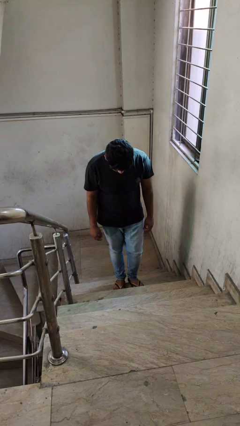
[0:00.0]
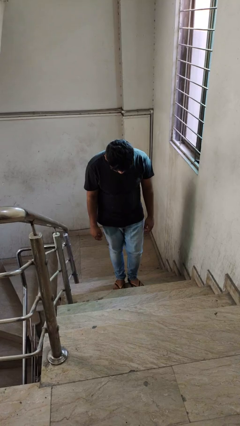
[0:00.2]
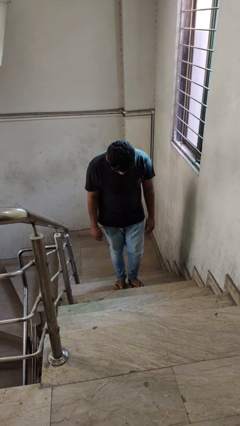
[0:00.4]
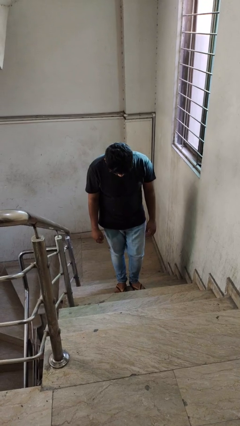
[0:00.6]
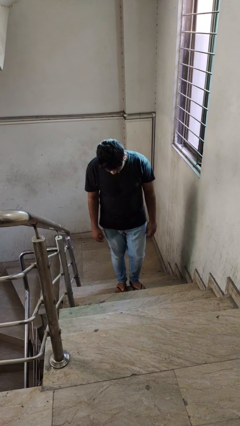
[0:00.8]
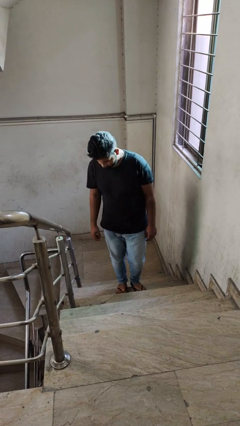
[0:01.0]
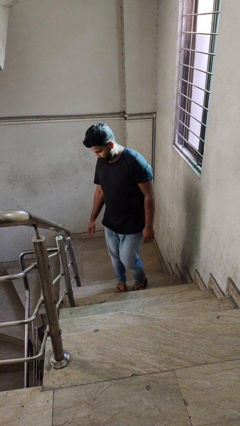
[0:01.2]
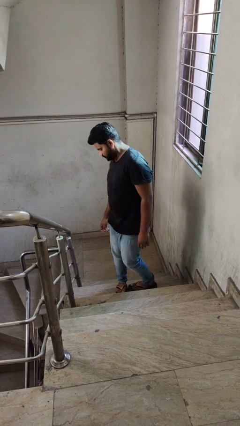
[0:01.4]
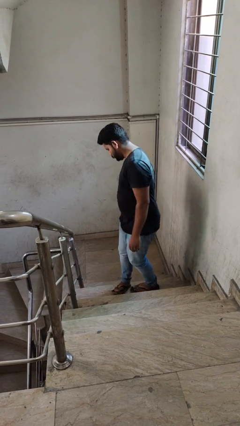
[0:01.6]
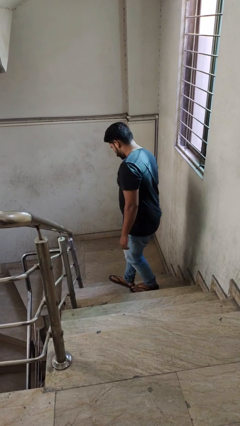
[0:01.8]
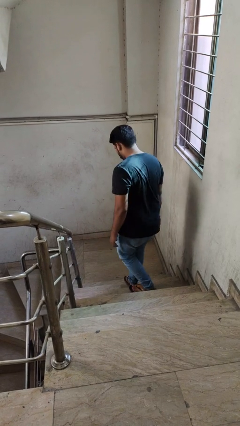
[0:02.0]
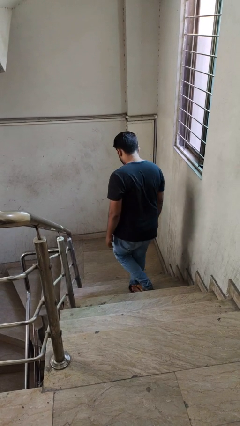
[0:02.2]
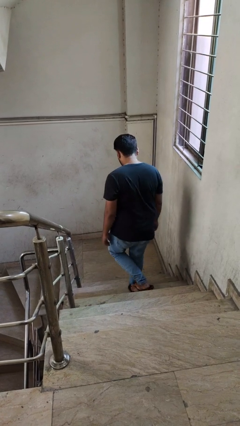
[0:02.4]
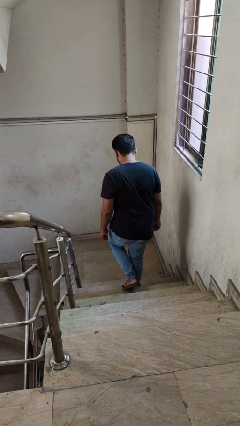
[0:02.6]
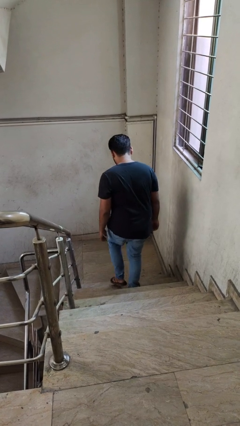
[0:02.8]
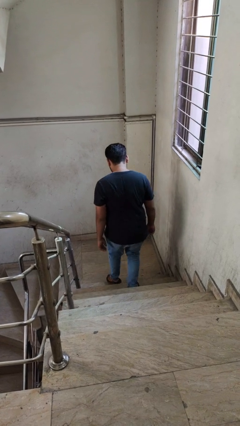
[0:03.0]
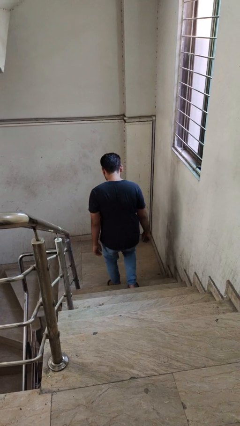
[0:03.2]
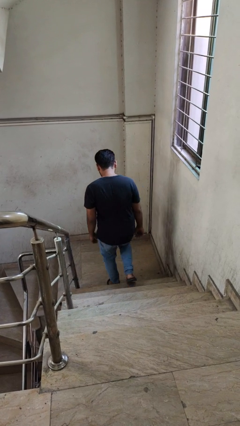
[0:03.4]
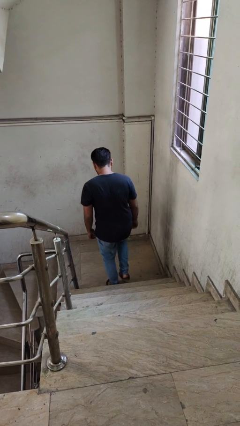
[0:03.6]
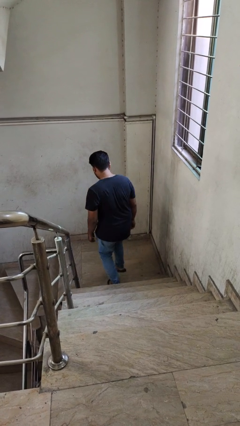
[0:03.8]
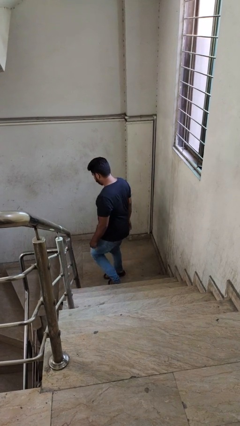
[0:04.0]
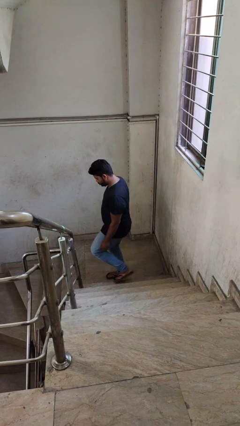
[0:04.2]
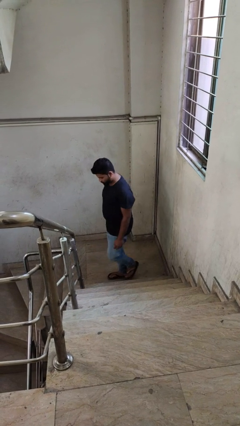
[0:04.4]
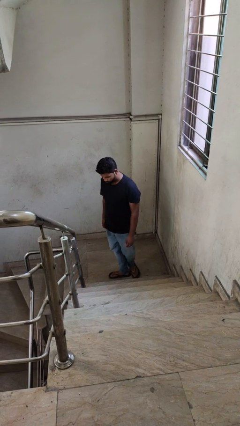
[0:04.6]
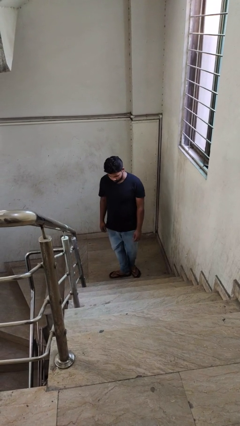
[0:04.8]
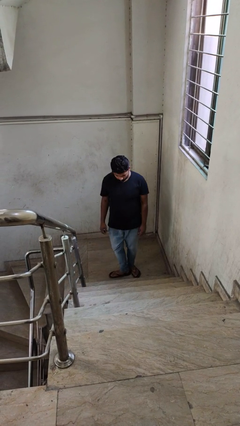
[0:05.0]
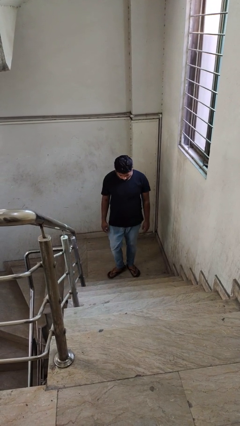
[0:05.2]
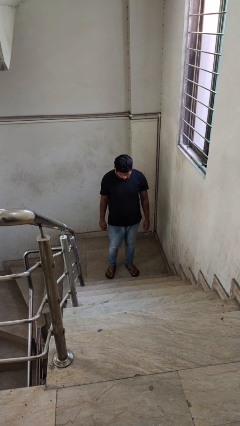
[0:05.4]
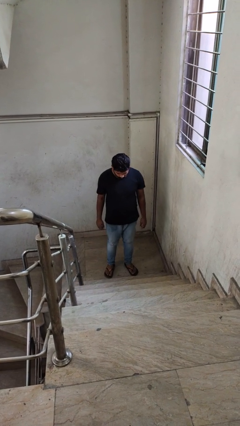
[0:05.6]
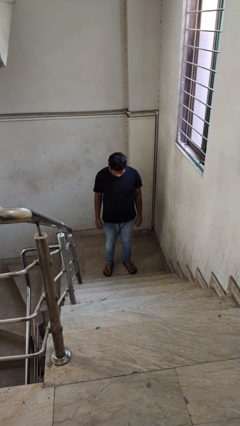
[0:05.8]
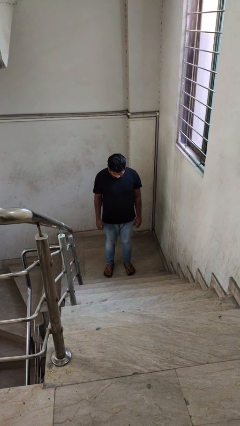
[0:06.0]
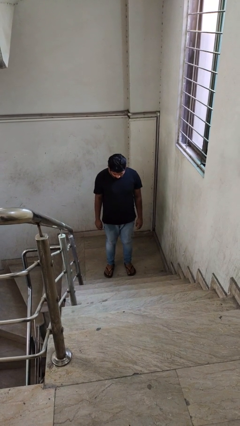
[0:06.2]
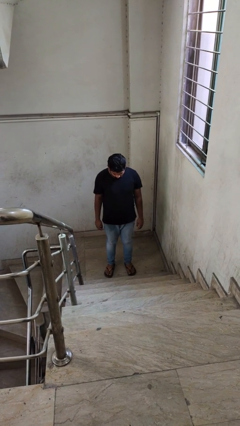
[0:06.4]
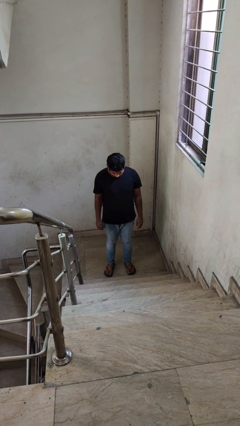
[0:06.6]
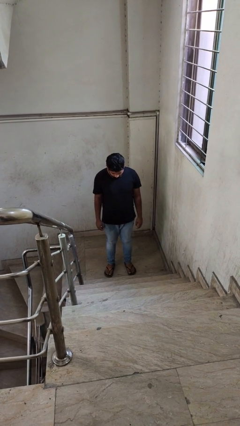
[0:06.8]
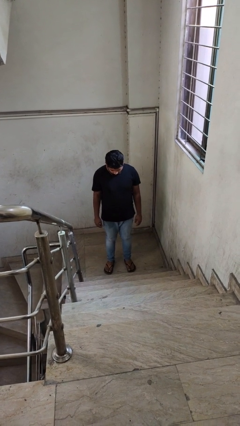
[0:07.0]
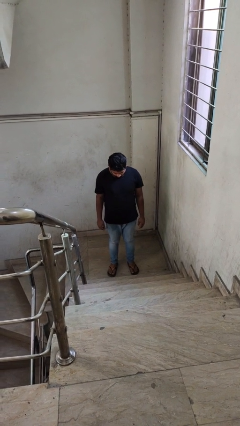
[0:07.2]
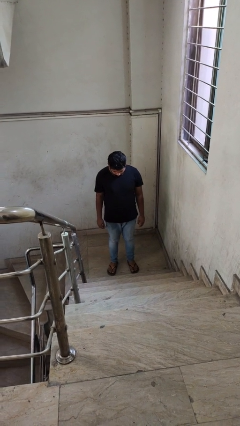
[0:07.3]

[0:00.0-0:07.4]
person climbs down stairs

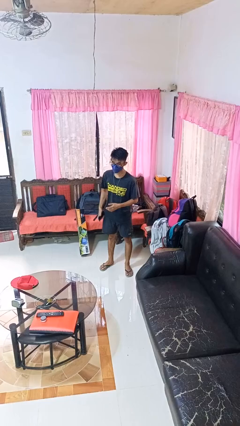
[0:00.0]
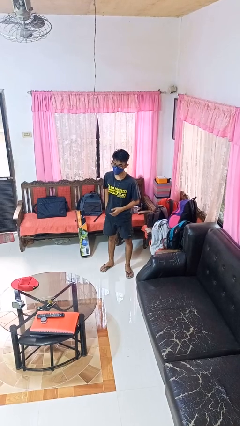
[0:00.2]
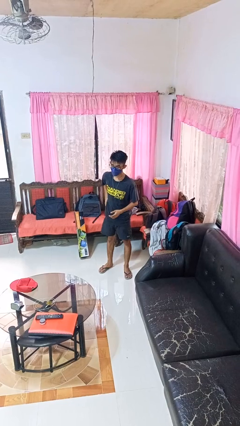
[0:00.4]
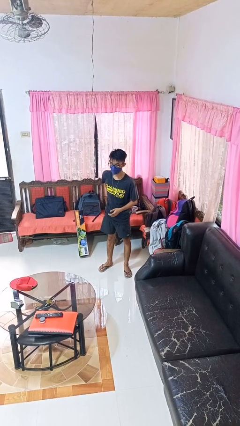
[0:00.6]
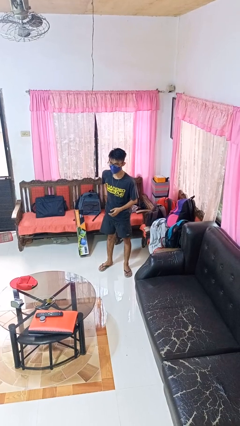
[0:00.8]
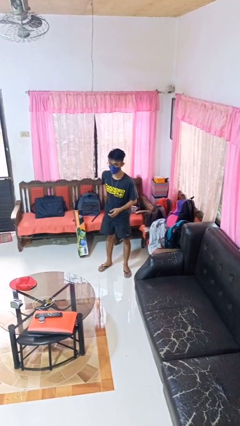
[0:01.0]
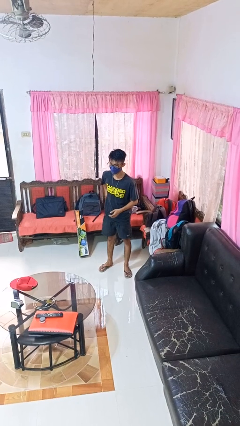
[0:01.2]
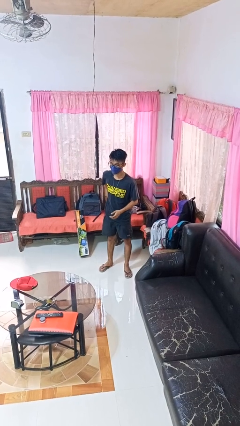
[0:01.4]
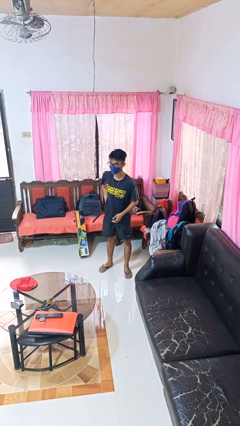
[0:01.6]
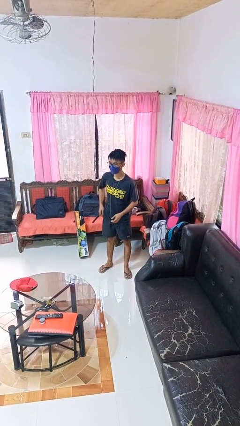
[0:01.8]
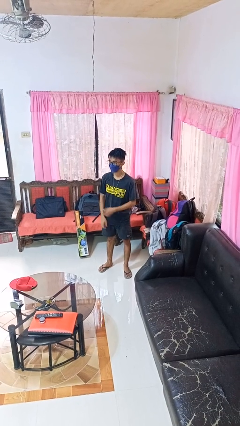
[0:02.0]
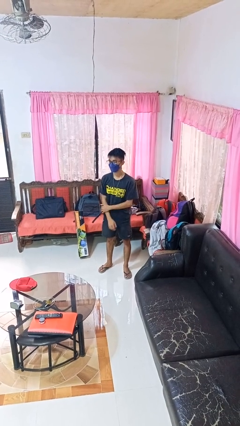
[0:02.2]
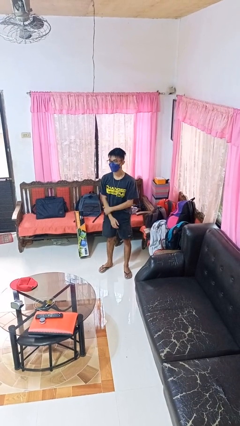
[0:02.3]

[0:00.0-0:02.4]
person puts phone into pocket

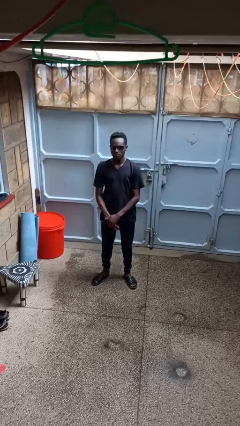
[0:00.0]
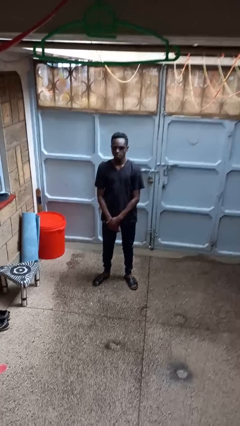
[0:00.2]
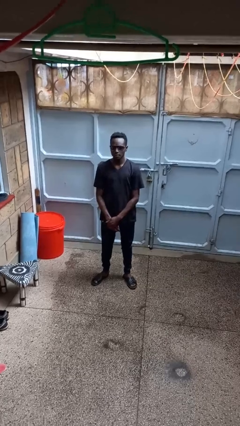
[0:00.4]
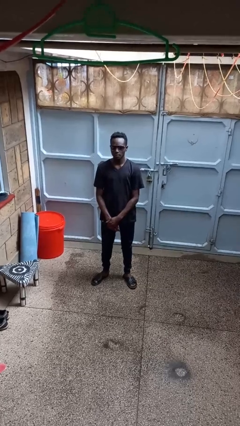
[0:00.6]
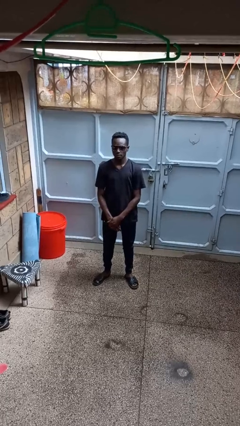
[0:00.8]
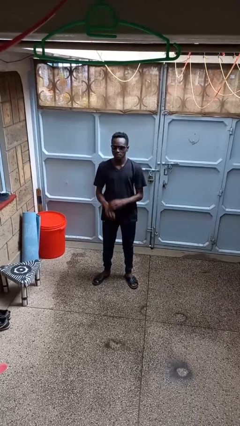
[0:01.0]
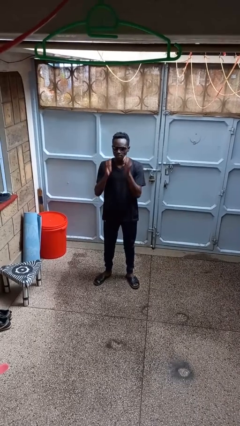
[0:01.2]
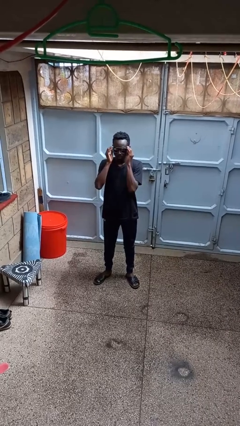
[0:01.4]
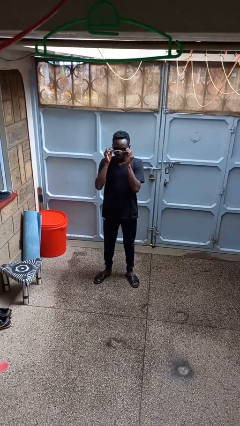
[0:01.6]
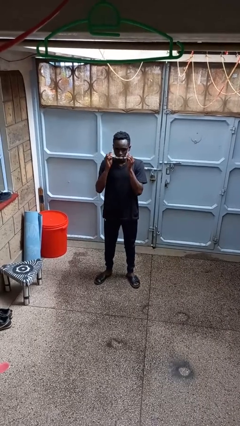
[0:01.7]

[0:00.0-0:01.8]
person takes off sunglasses

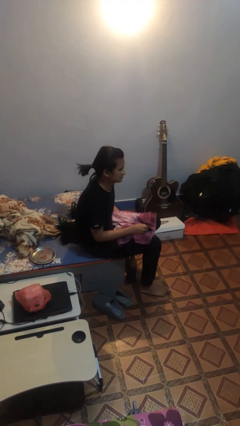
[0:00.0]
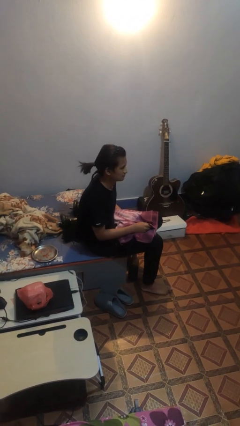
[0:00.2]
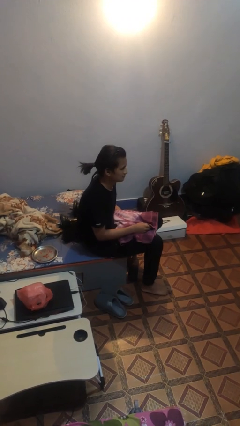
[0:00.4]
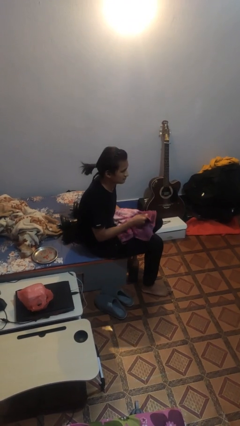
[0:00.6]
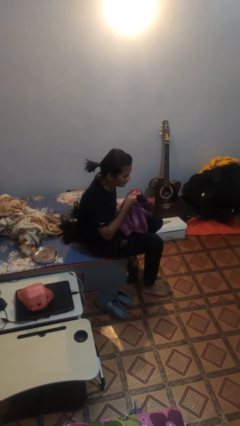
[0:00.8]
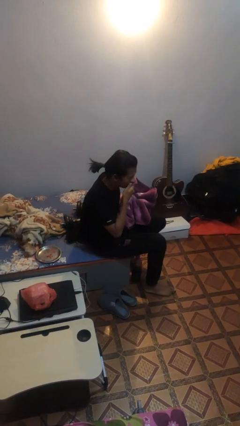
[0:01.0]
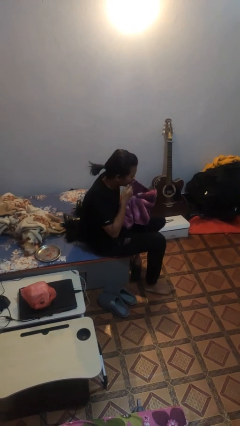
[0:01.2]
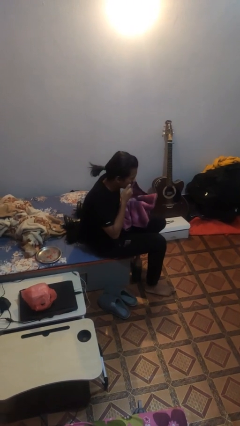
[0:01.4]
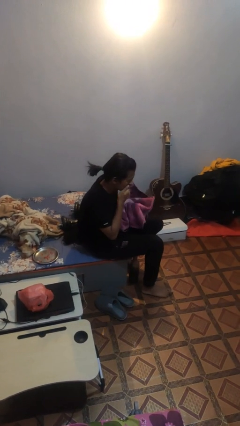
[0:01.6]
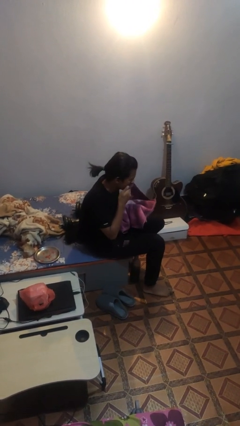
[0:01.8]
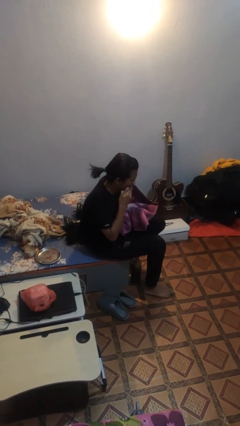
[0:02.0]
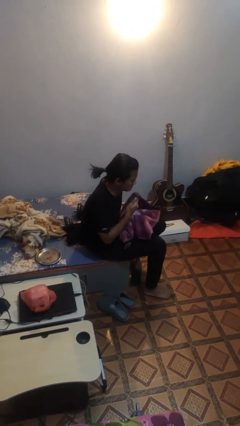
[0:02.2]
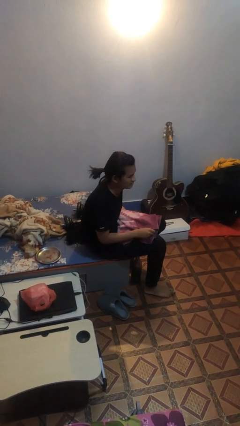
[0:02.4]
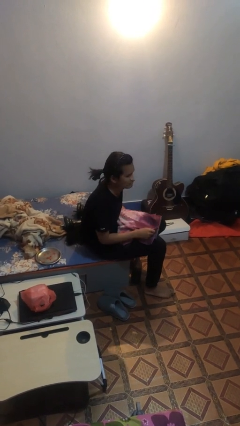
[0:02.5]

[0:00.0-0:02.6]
person wipes mouth with napkin

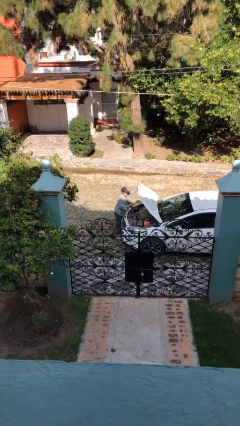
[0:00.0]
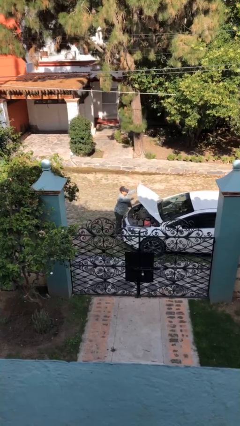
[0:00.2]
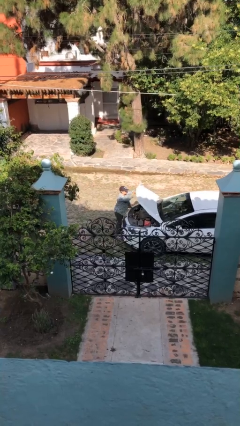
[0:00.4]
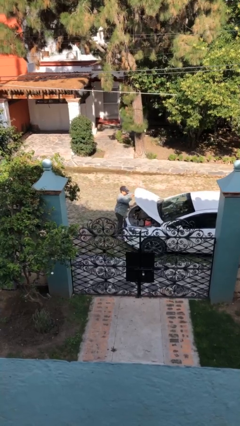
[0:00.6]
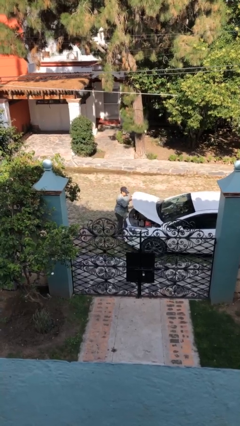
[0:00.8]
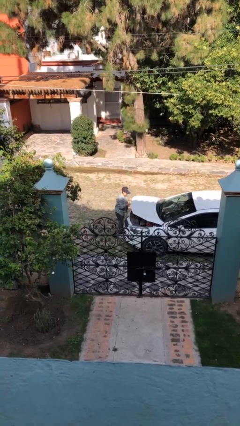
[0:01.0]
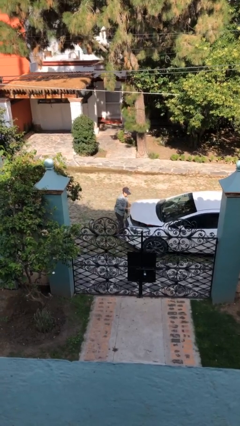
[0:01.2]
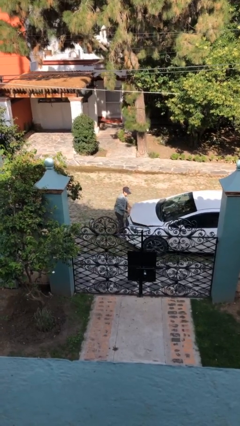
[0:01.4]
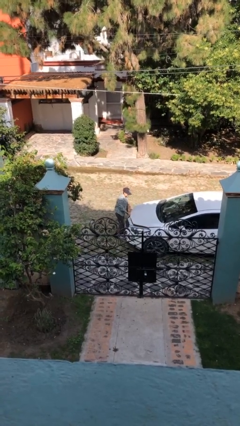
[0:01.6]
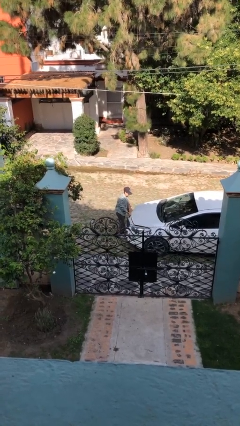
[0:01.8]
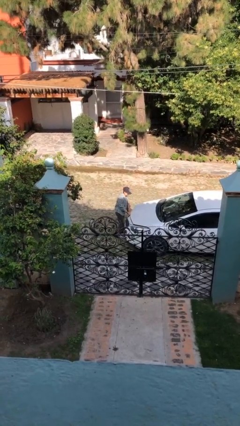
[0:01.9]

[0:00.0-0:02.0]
person closes car hood

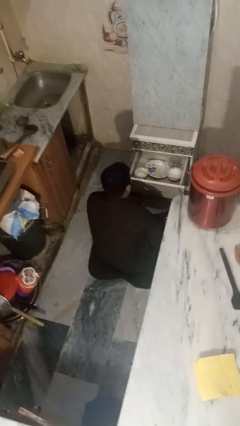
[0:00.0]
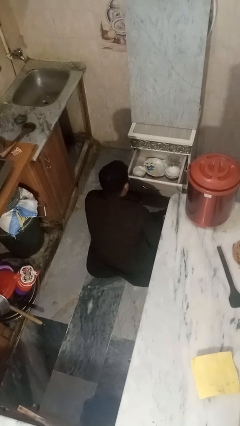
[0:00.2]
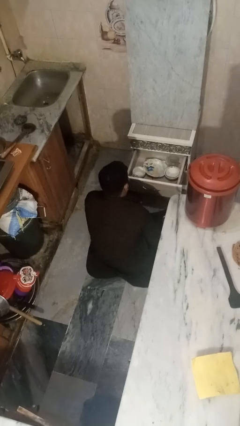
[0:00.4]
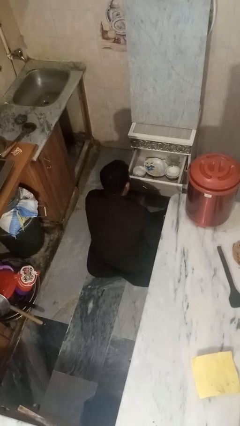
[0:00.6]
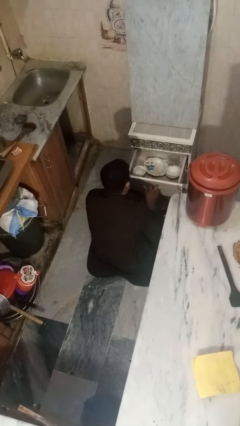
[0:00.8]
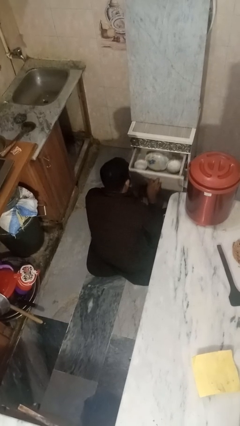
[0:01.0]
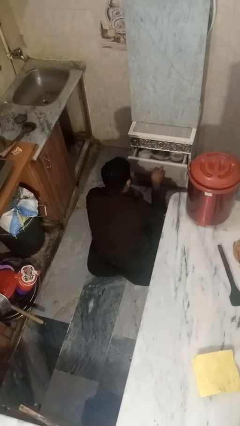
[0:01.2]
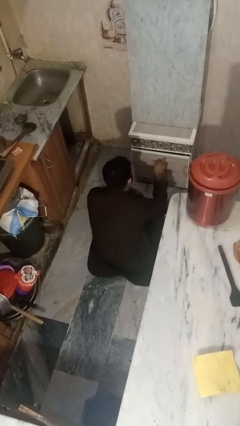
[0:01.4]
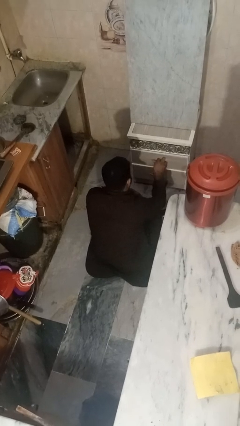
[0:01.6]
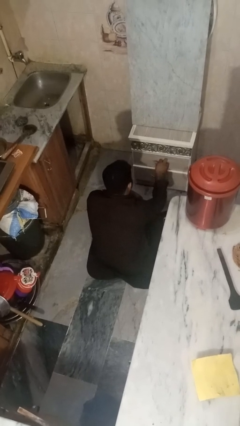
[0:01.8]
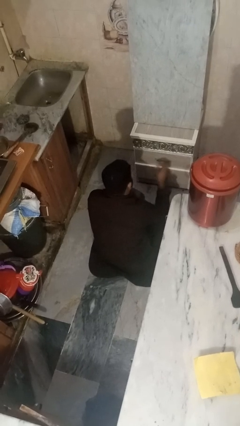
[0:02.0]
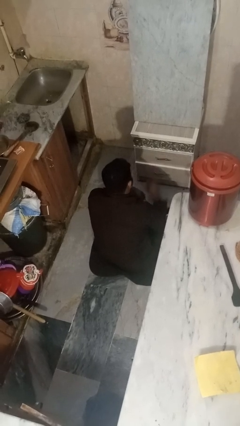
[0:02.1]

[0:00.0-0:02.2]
person closes kitchen drawer
